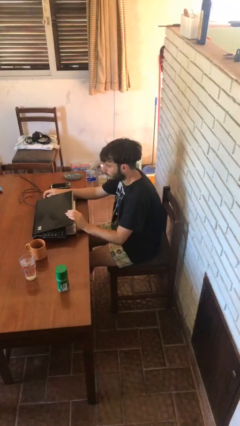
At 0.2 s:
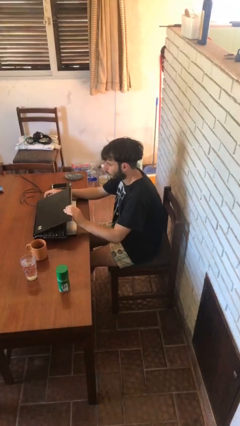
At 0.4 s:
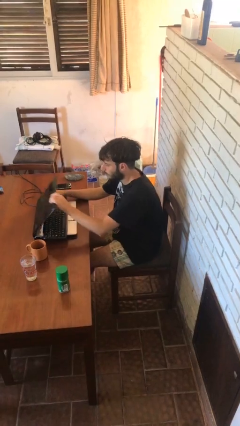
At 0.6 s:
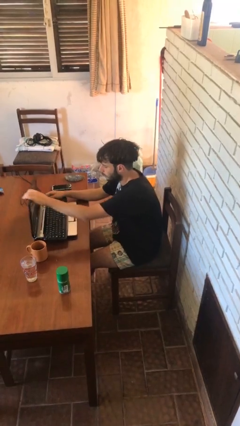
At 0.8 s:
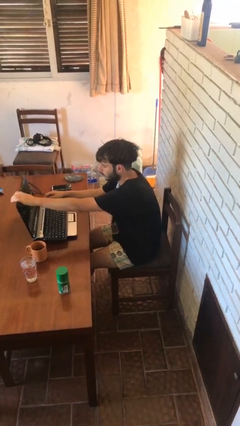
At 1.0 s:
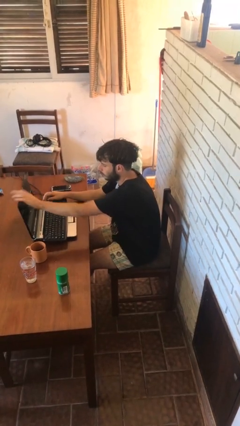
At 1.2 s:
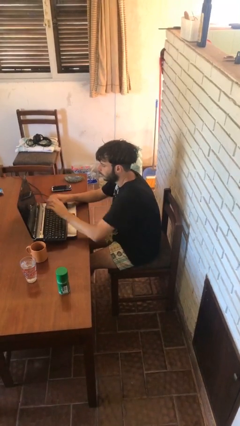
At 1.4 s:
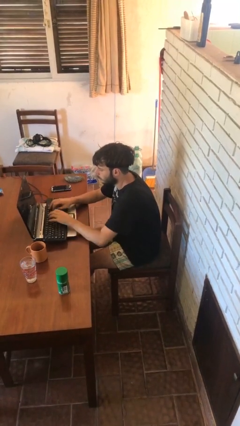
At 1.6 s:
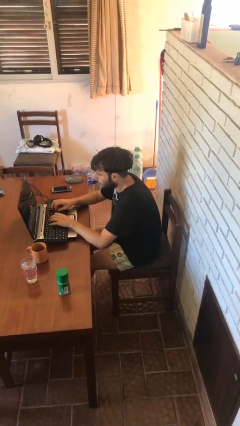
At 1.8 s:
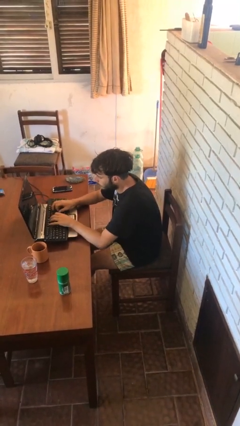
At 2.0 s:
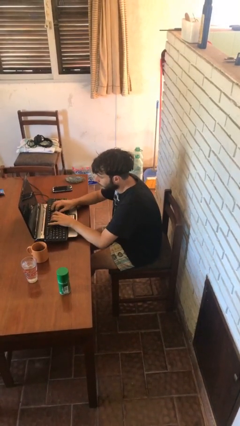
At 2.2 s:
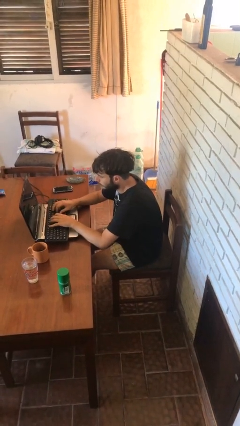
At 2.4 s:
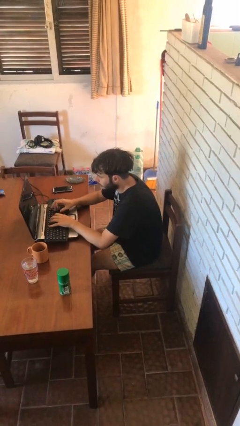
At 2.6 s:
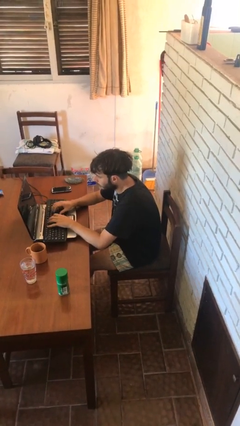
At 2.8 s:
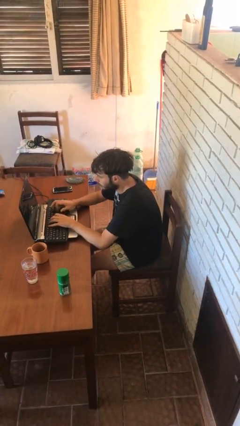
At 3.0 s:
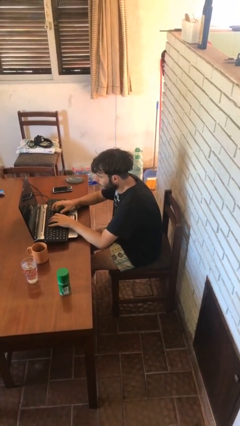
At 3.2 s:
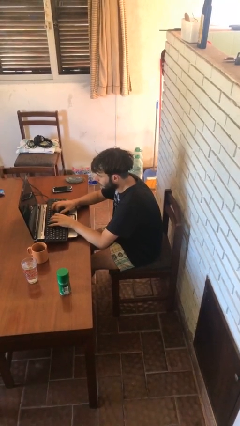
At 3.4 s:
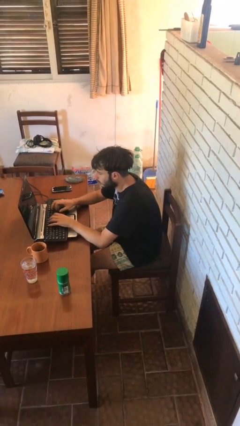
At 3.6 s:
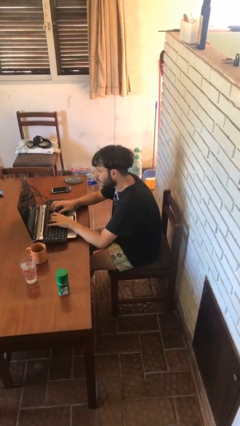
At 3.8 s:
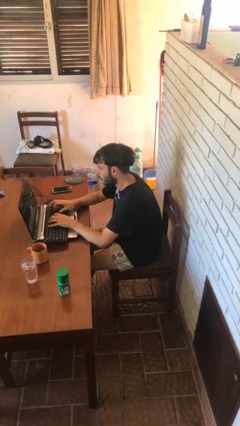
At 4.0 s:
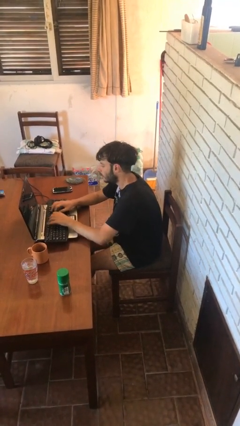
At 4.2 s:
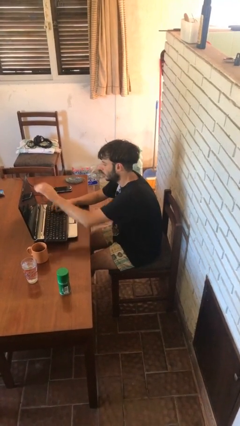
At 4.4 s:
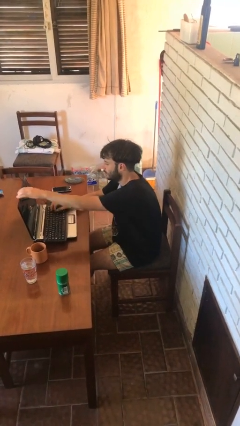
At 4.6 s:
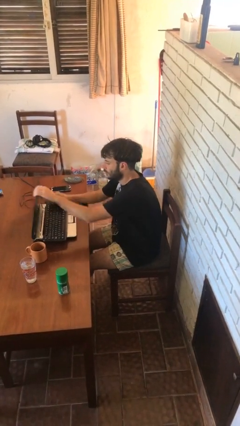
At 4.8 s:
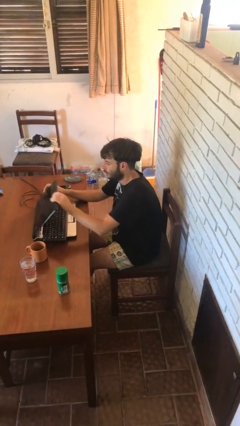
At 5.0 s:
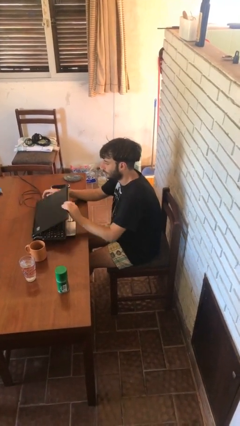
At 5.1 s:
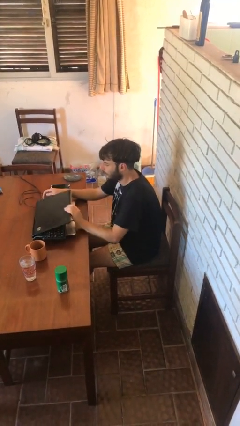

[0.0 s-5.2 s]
person interacts with laptop

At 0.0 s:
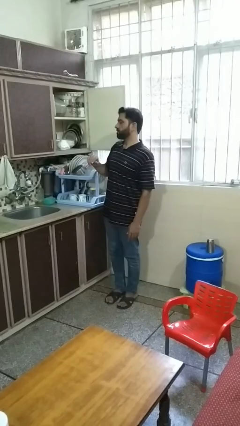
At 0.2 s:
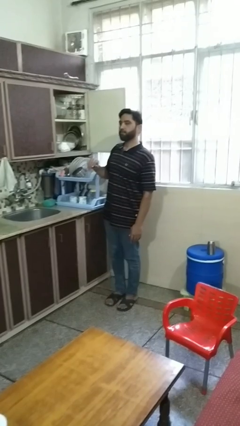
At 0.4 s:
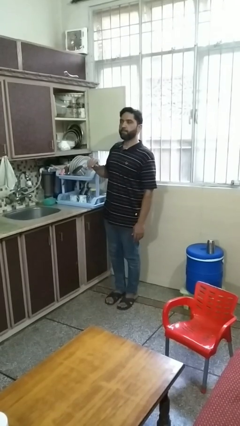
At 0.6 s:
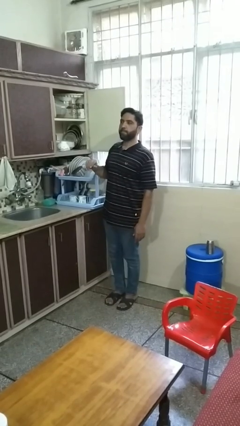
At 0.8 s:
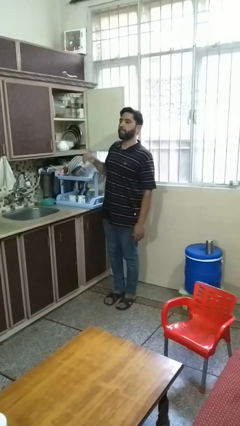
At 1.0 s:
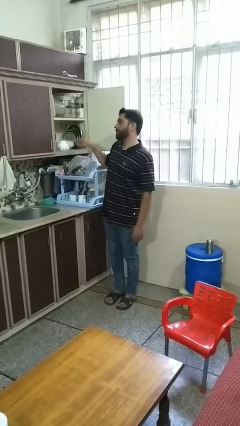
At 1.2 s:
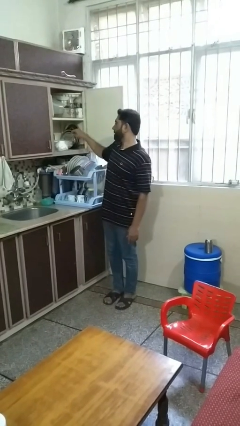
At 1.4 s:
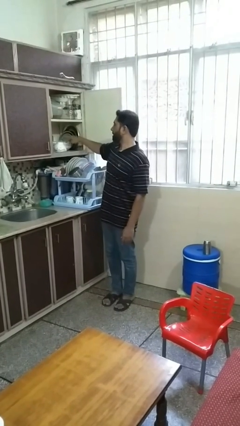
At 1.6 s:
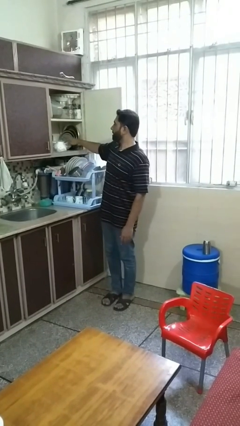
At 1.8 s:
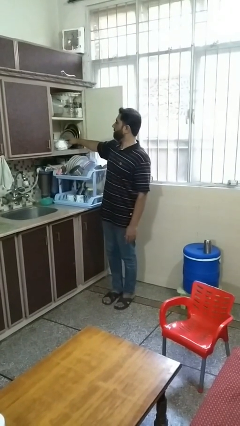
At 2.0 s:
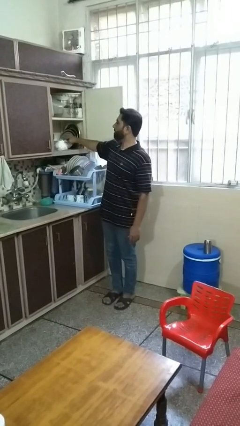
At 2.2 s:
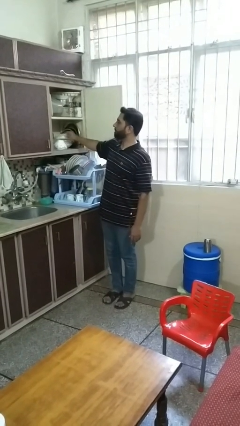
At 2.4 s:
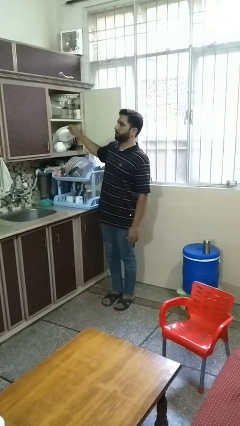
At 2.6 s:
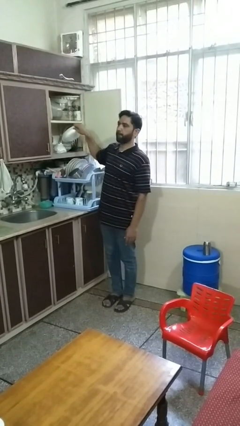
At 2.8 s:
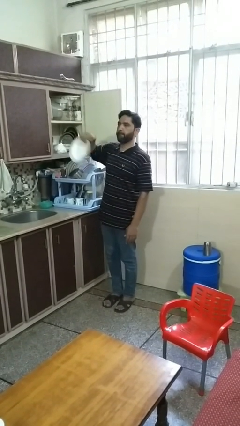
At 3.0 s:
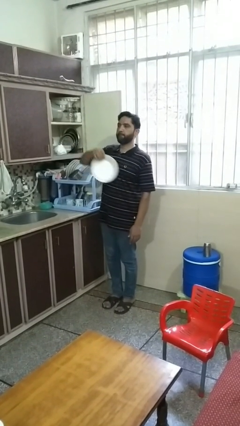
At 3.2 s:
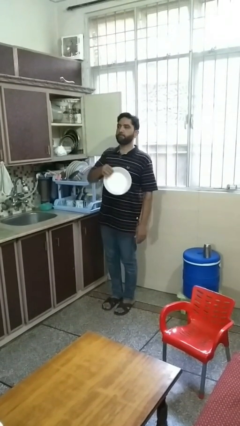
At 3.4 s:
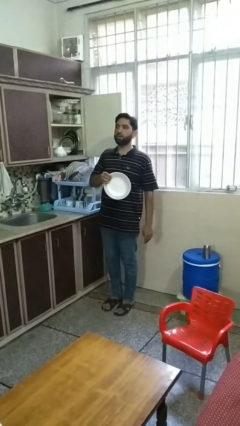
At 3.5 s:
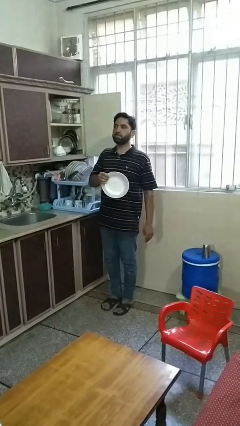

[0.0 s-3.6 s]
person takes object from cabinet

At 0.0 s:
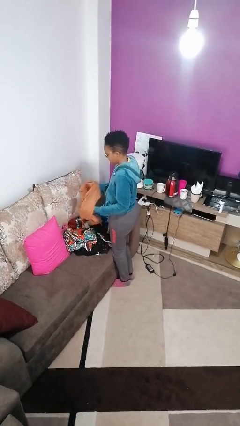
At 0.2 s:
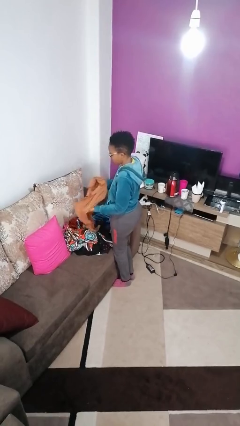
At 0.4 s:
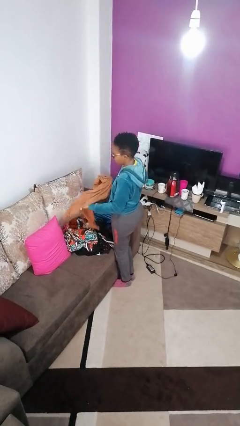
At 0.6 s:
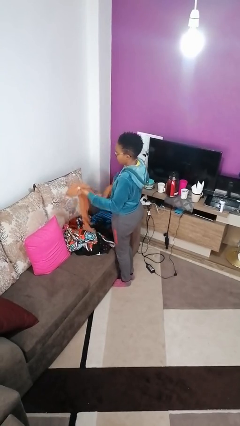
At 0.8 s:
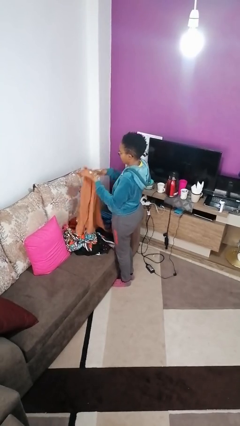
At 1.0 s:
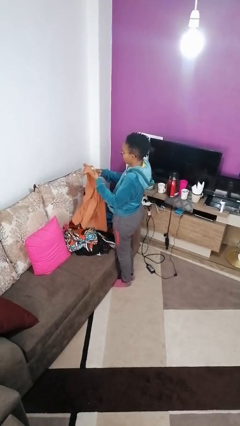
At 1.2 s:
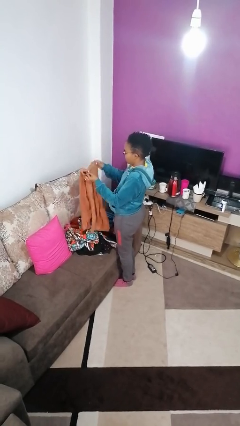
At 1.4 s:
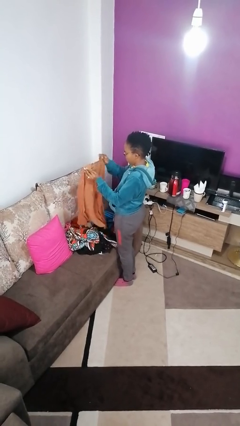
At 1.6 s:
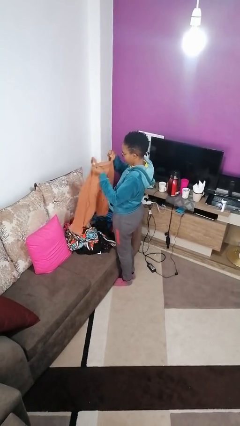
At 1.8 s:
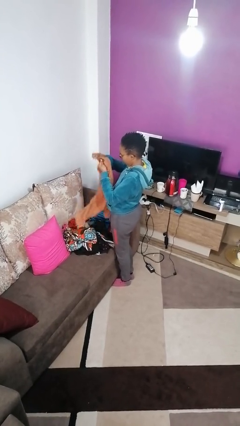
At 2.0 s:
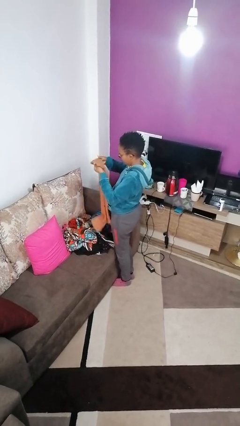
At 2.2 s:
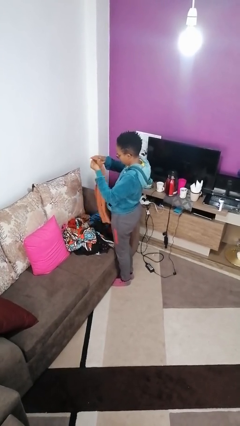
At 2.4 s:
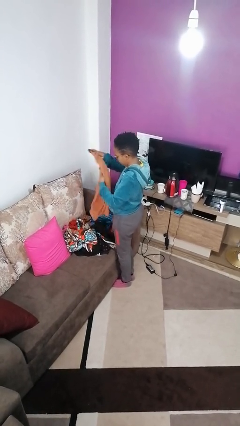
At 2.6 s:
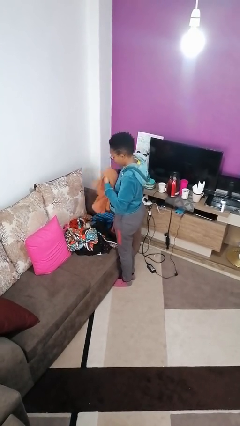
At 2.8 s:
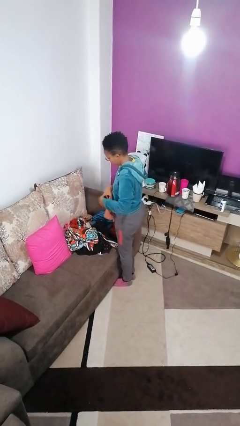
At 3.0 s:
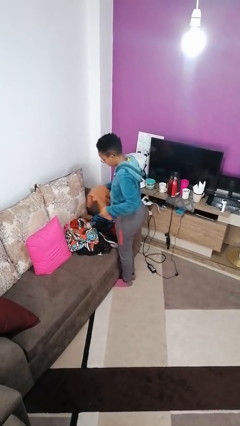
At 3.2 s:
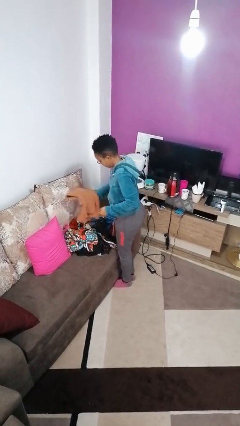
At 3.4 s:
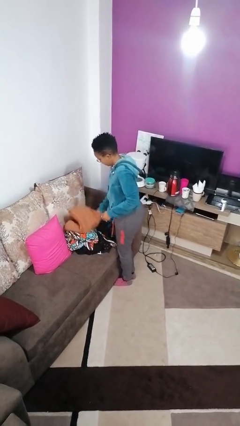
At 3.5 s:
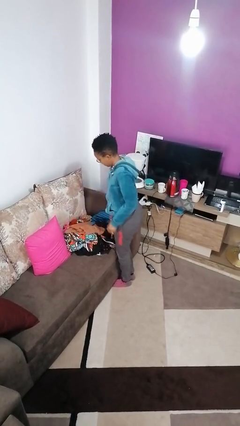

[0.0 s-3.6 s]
person folds shirt

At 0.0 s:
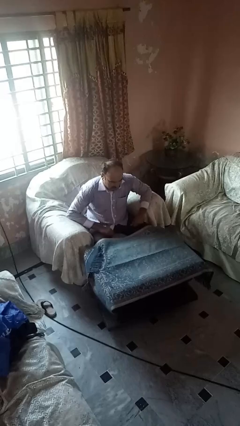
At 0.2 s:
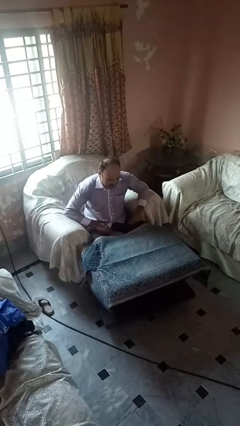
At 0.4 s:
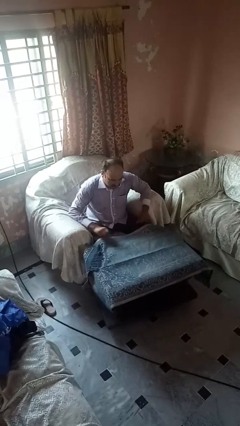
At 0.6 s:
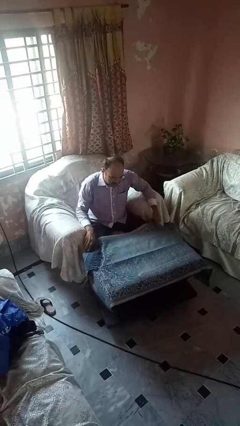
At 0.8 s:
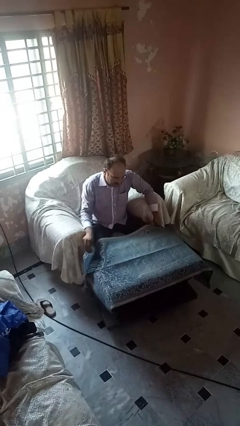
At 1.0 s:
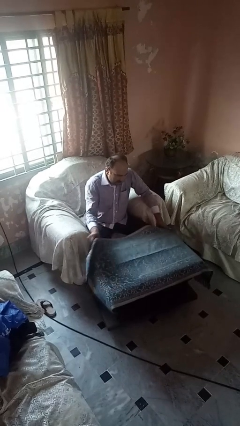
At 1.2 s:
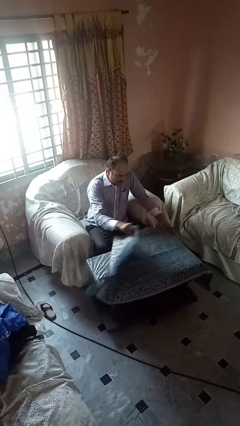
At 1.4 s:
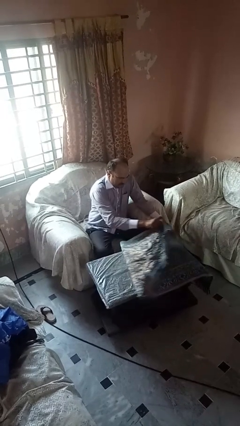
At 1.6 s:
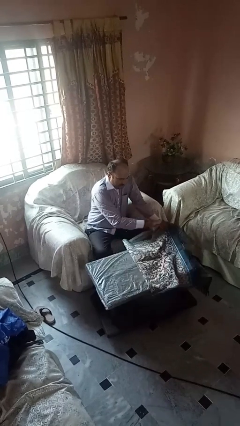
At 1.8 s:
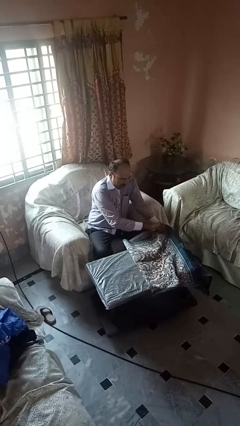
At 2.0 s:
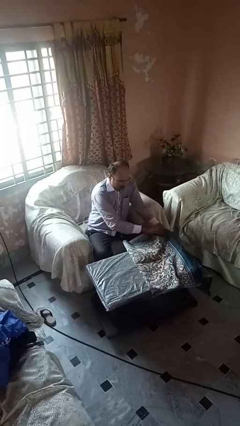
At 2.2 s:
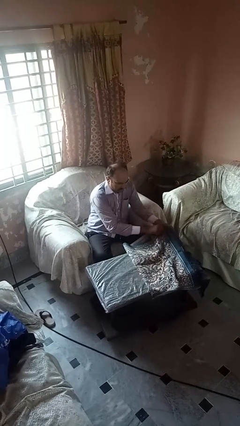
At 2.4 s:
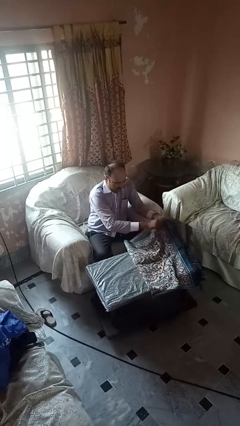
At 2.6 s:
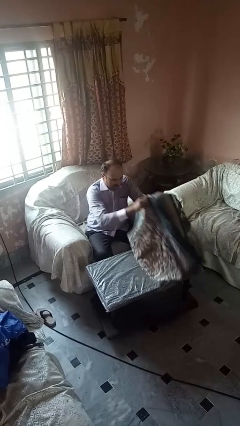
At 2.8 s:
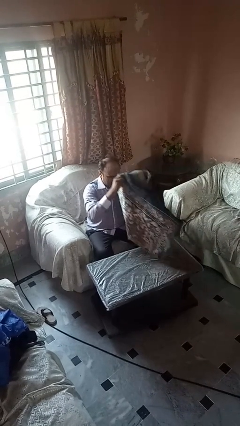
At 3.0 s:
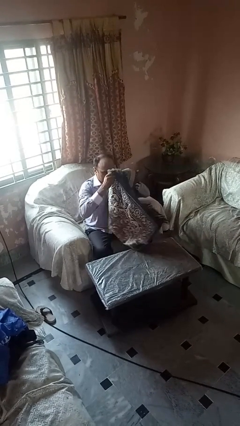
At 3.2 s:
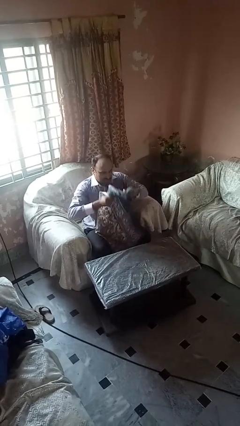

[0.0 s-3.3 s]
person folds tablecloth

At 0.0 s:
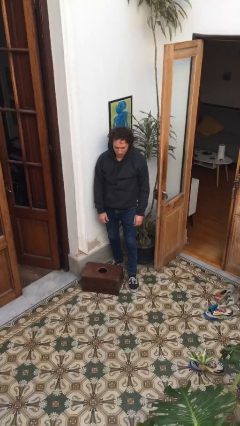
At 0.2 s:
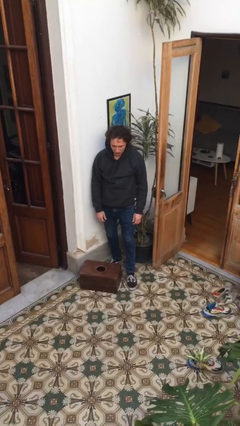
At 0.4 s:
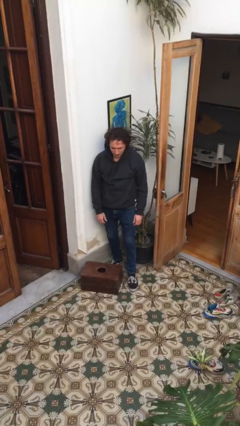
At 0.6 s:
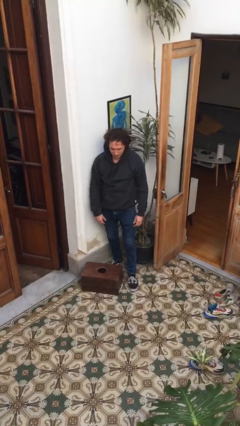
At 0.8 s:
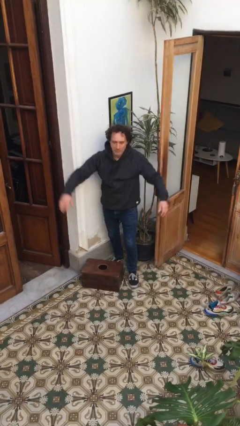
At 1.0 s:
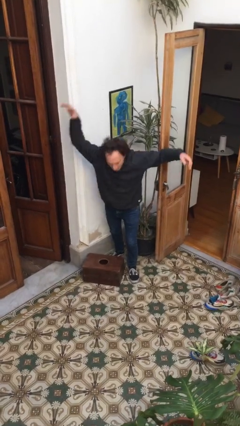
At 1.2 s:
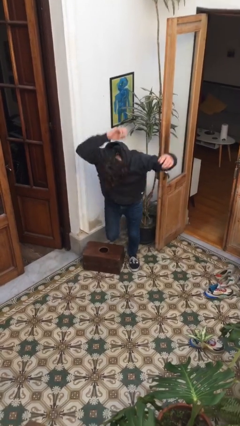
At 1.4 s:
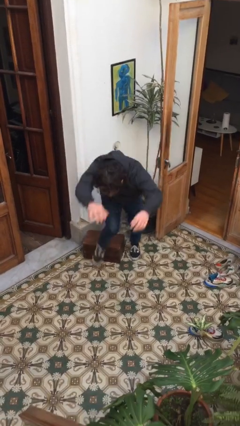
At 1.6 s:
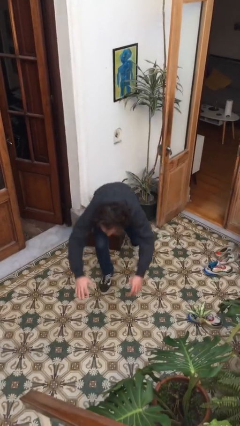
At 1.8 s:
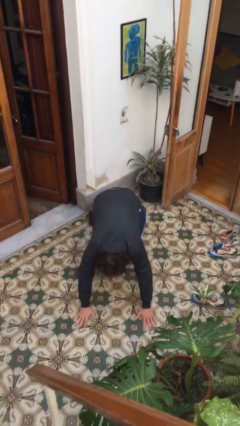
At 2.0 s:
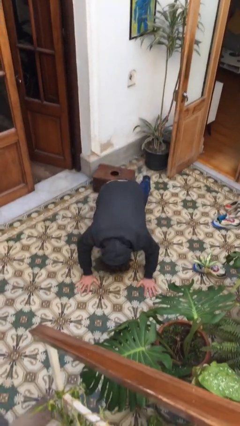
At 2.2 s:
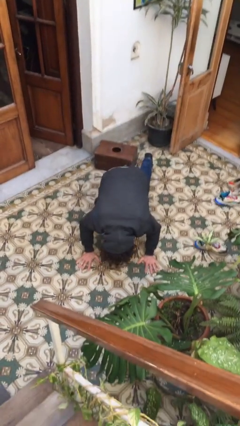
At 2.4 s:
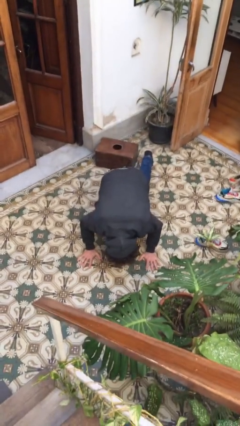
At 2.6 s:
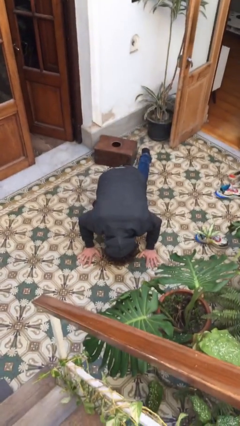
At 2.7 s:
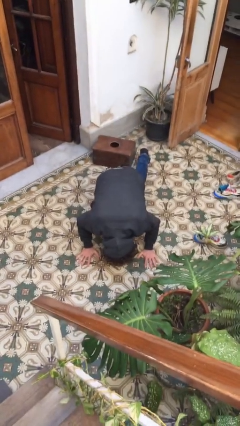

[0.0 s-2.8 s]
person trips on object on floor
